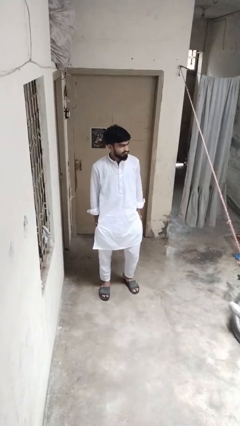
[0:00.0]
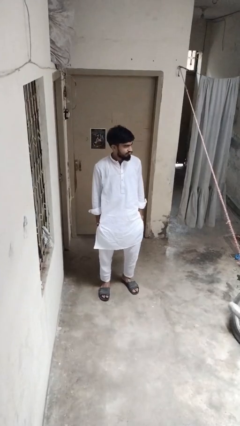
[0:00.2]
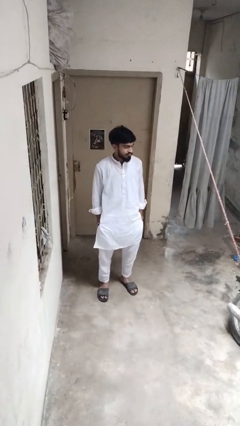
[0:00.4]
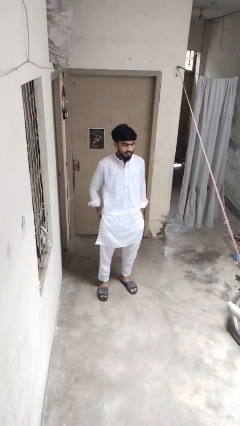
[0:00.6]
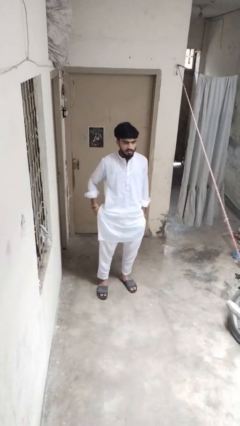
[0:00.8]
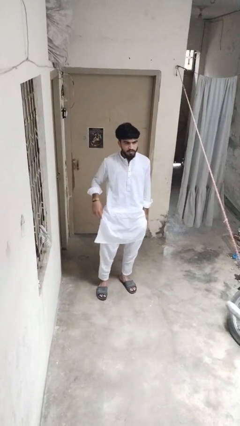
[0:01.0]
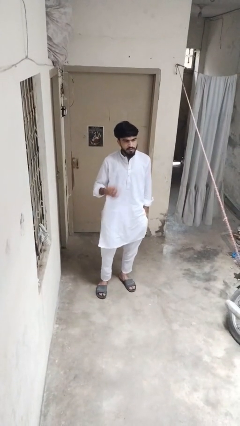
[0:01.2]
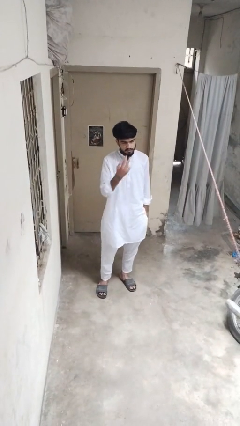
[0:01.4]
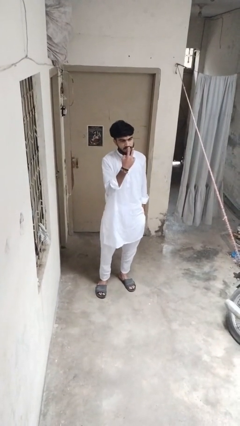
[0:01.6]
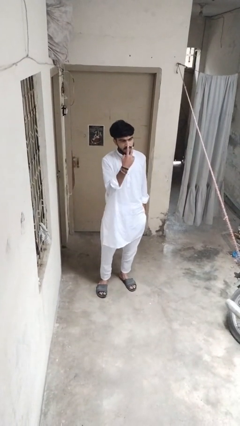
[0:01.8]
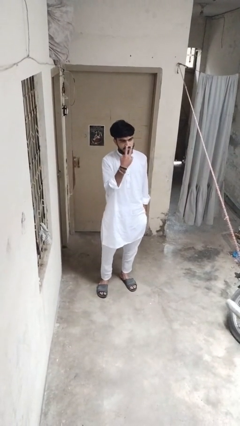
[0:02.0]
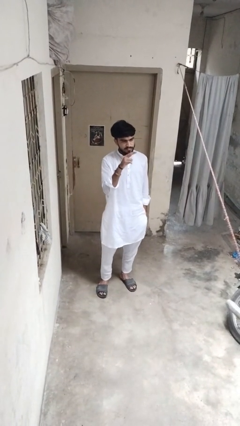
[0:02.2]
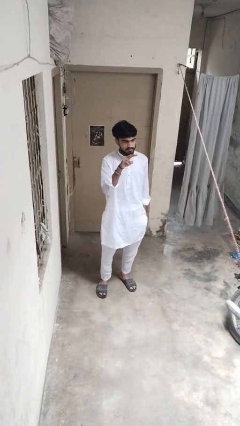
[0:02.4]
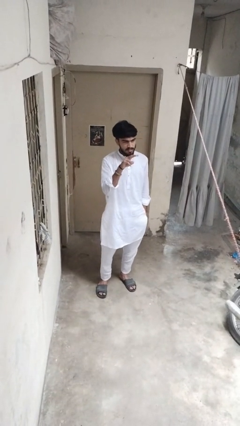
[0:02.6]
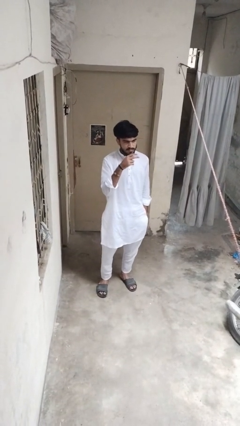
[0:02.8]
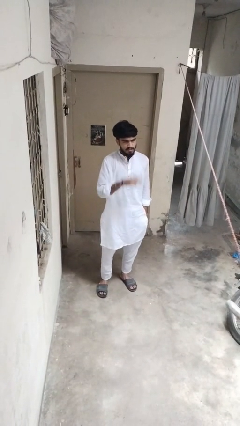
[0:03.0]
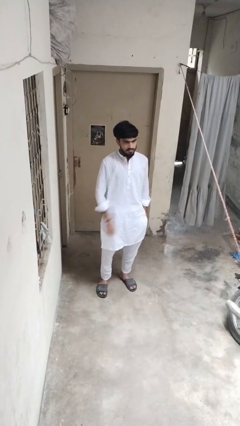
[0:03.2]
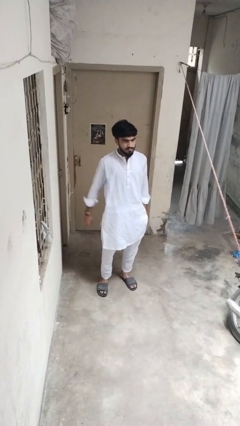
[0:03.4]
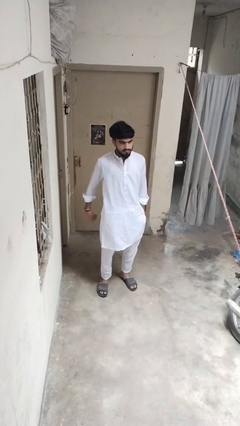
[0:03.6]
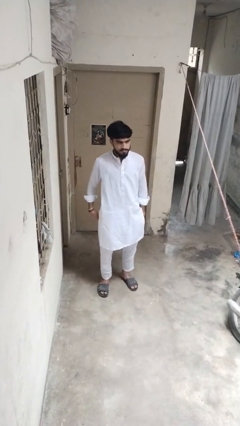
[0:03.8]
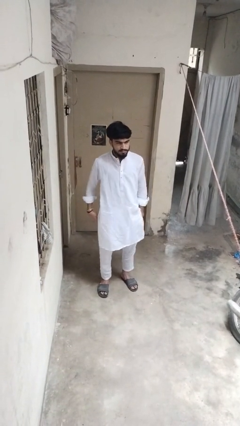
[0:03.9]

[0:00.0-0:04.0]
person gestures watch closely

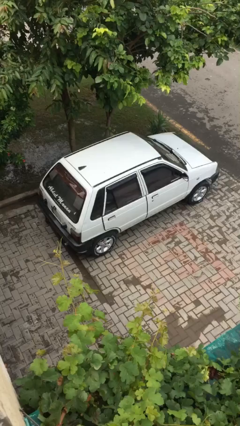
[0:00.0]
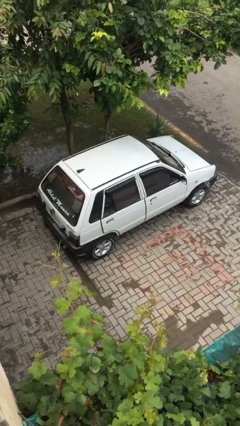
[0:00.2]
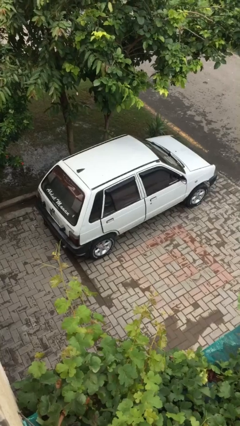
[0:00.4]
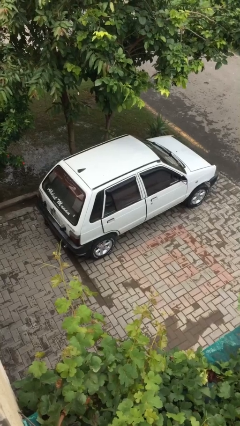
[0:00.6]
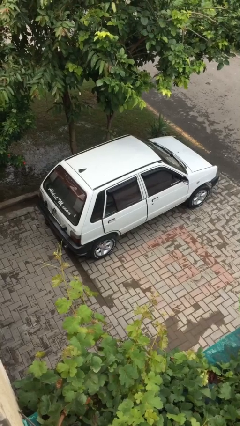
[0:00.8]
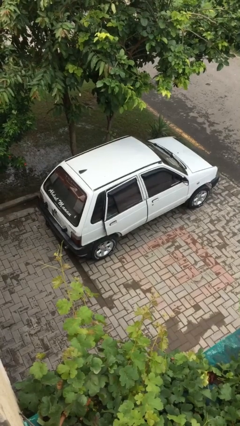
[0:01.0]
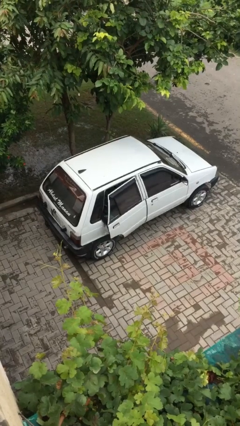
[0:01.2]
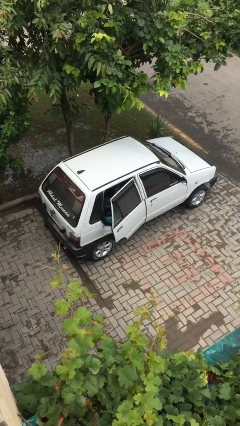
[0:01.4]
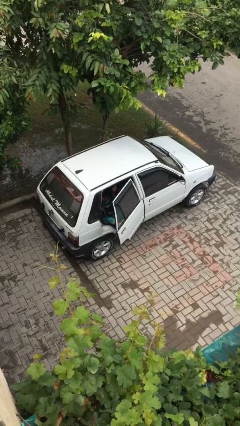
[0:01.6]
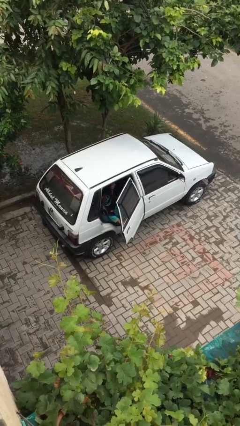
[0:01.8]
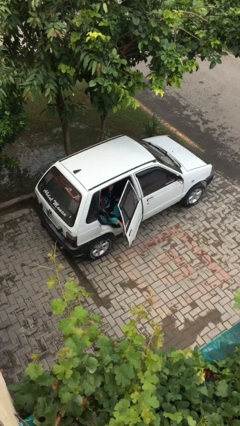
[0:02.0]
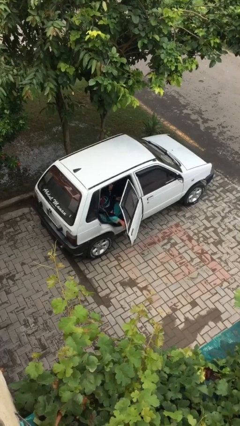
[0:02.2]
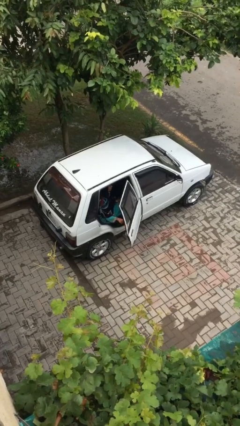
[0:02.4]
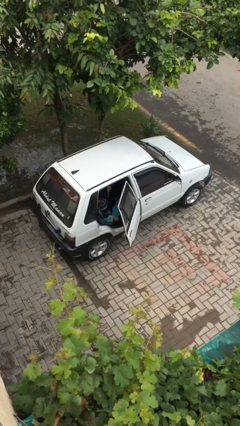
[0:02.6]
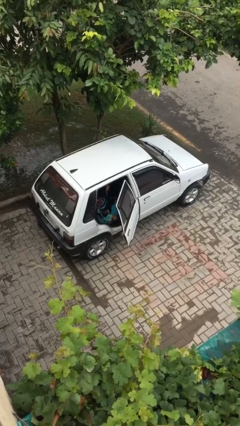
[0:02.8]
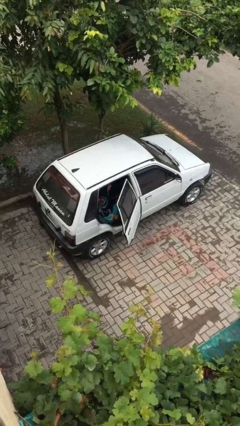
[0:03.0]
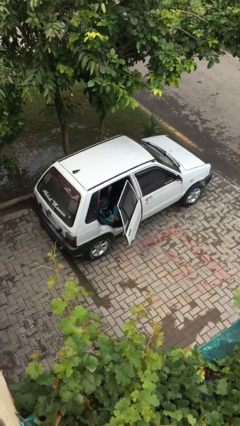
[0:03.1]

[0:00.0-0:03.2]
person opens car door

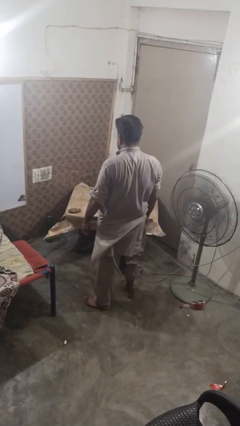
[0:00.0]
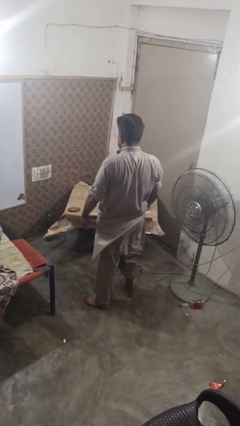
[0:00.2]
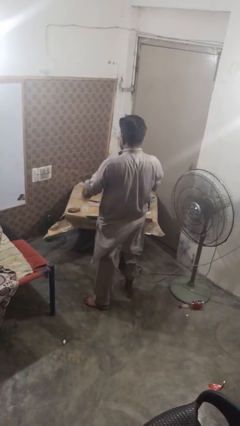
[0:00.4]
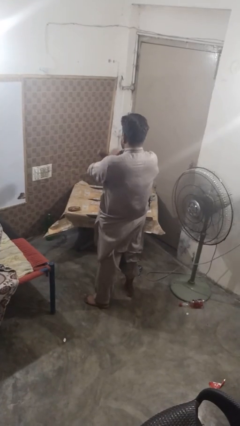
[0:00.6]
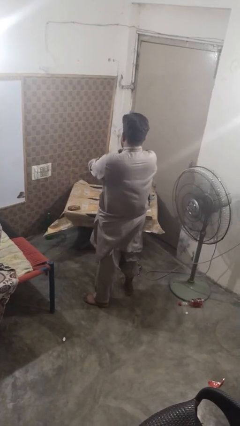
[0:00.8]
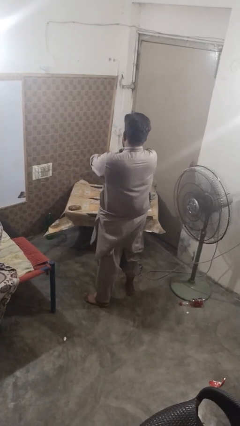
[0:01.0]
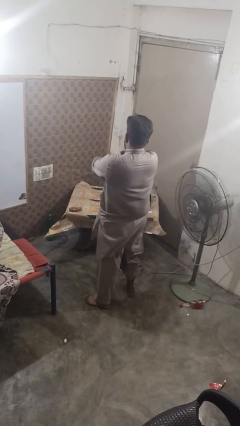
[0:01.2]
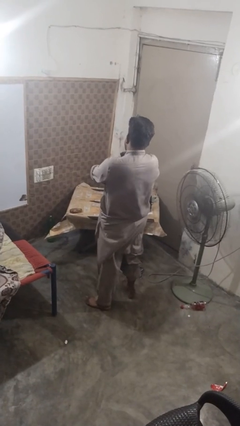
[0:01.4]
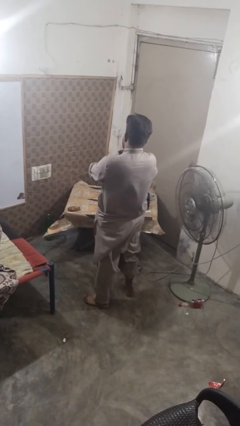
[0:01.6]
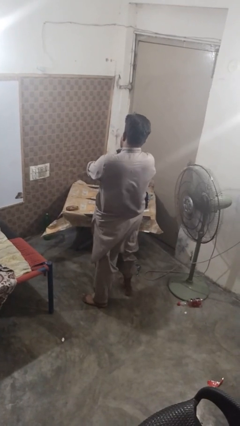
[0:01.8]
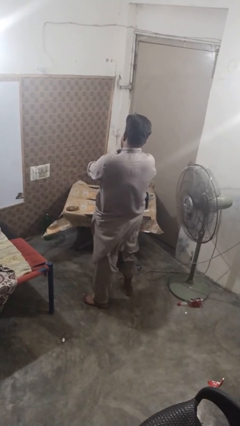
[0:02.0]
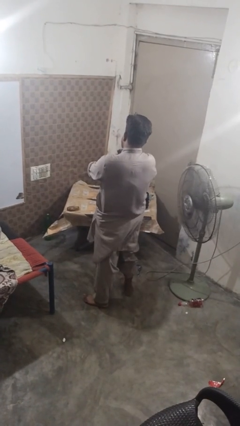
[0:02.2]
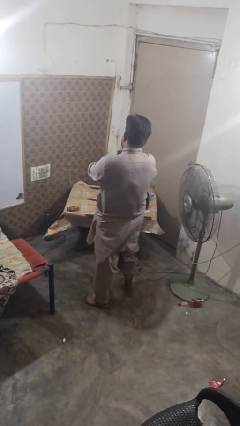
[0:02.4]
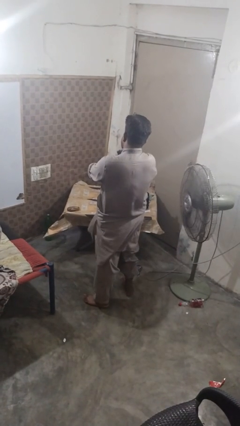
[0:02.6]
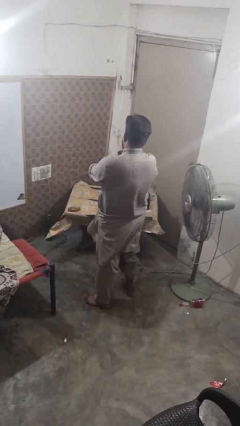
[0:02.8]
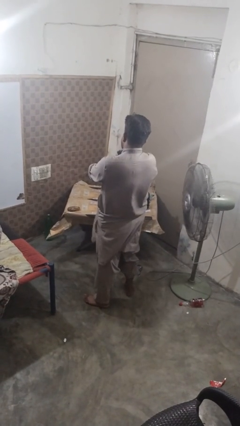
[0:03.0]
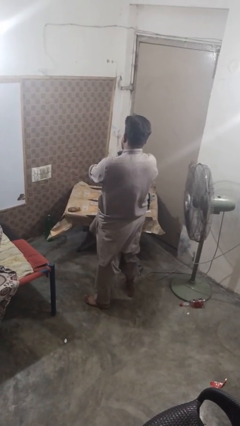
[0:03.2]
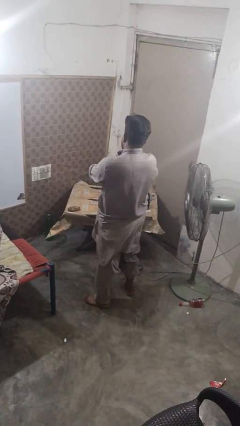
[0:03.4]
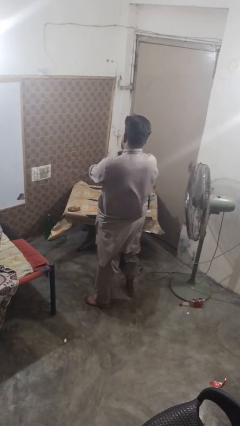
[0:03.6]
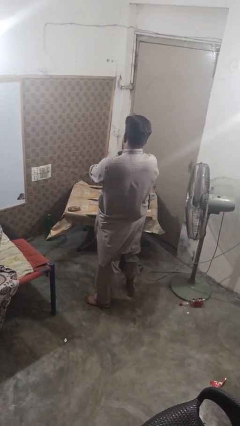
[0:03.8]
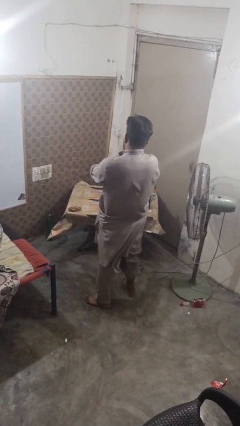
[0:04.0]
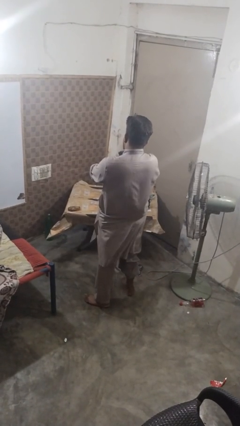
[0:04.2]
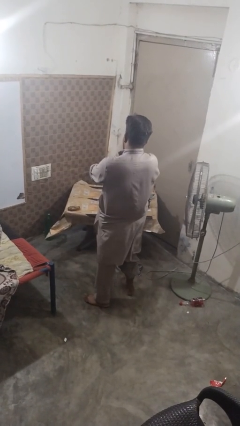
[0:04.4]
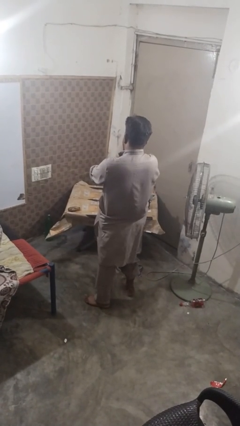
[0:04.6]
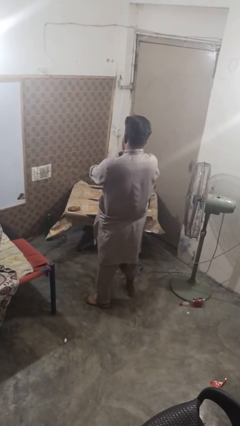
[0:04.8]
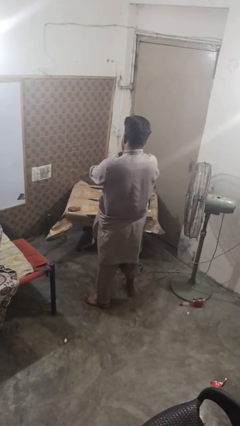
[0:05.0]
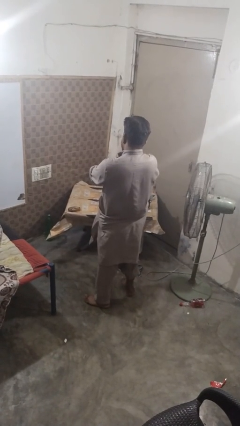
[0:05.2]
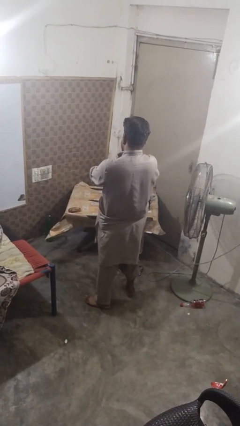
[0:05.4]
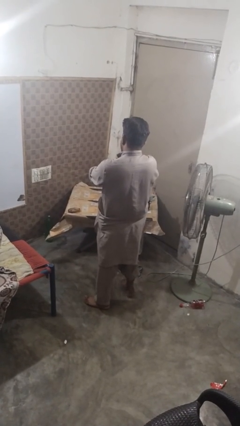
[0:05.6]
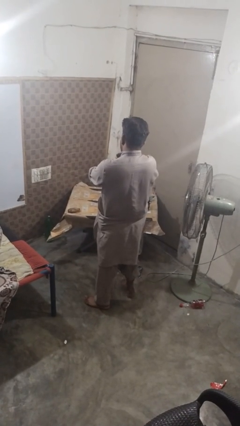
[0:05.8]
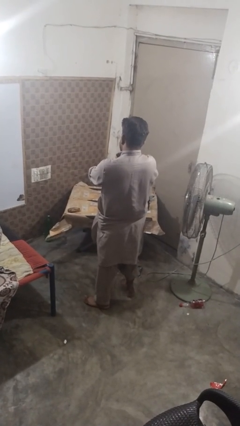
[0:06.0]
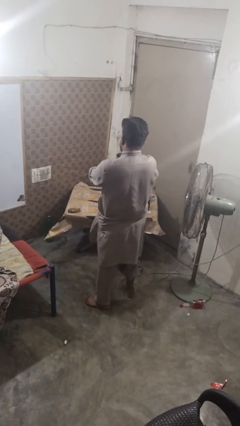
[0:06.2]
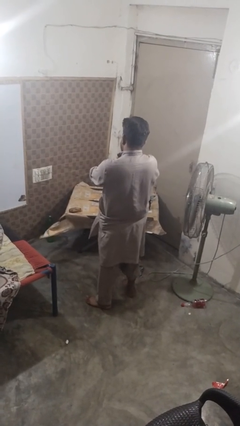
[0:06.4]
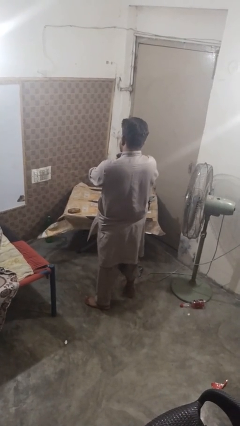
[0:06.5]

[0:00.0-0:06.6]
person crosses arms

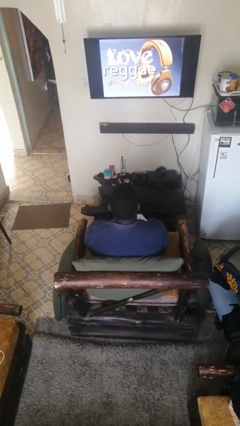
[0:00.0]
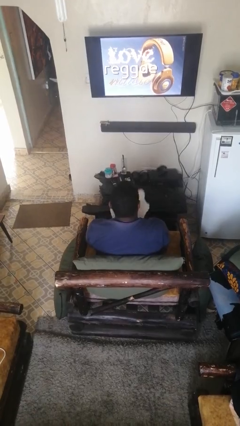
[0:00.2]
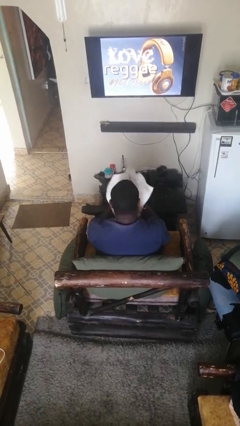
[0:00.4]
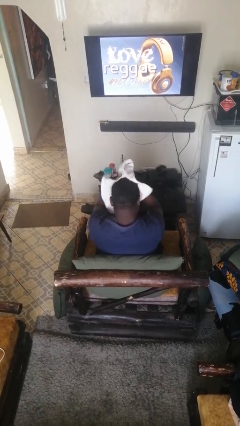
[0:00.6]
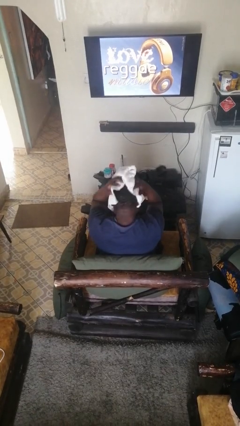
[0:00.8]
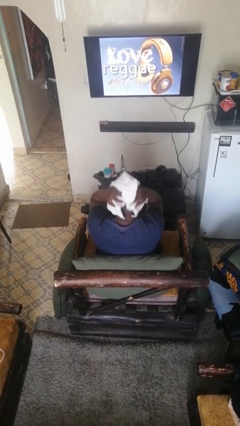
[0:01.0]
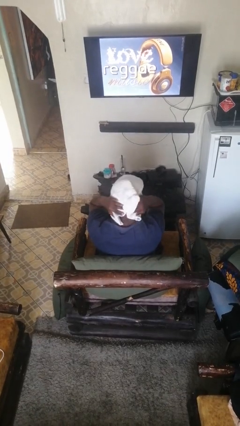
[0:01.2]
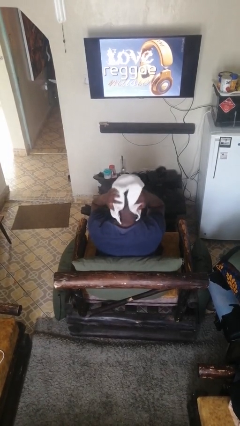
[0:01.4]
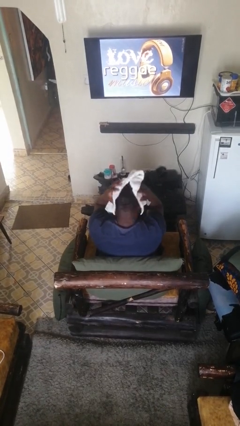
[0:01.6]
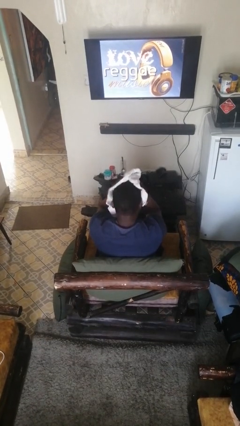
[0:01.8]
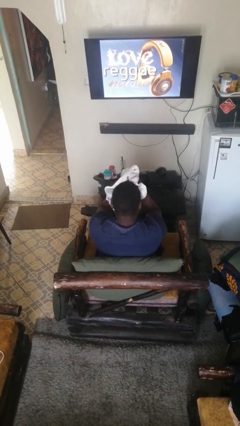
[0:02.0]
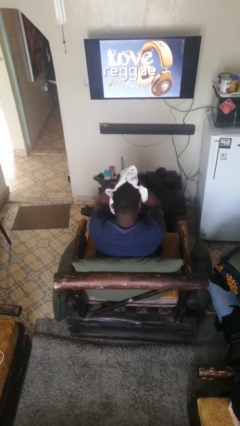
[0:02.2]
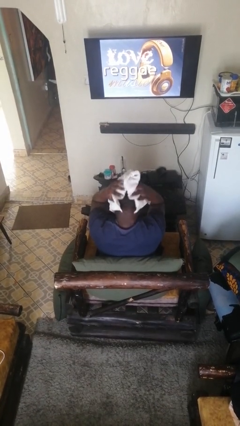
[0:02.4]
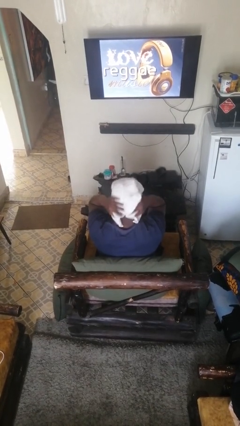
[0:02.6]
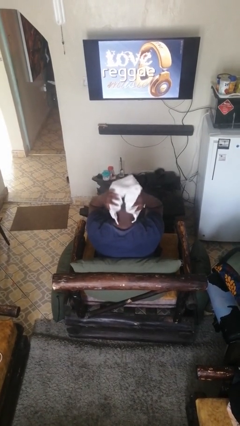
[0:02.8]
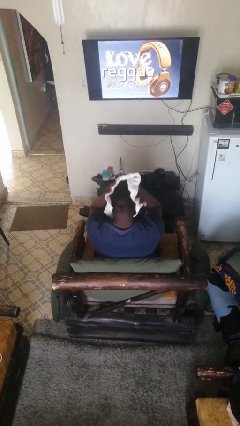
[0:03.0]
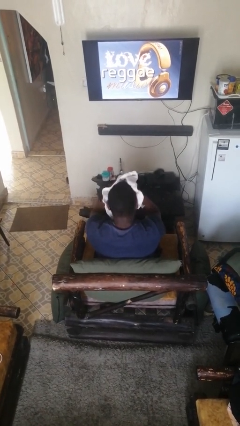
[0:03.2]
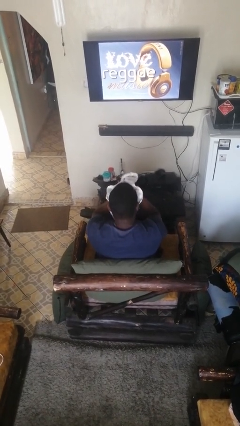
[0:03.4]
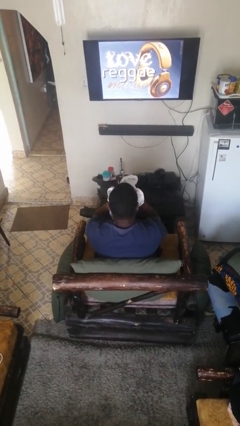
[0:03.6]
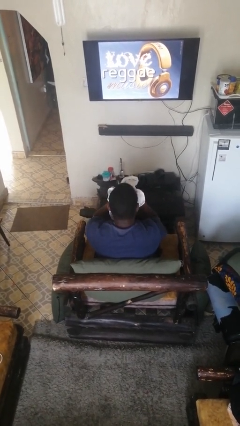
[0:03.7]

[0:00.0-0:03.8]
person dries hair with towel
